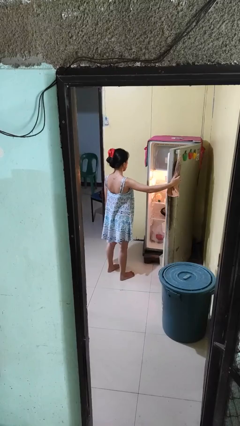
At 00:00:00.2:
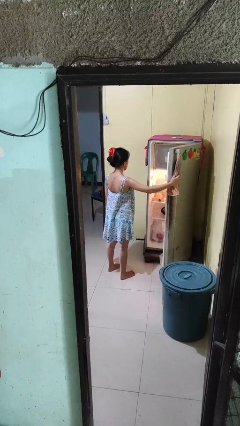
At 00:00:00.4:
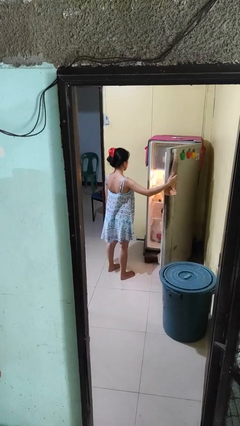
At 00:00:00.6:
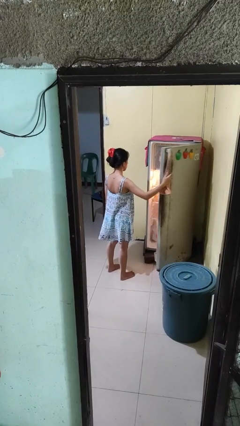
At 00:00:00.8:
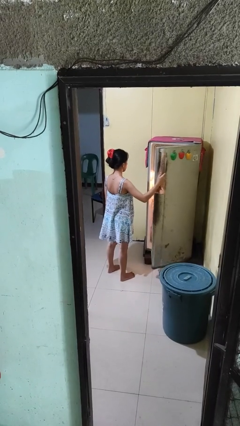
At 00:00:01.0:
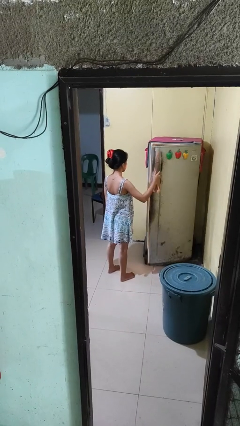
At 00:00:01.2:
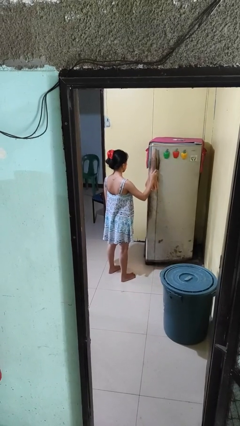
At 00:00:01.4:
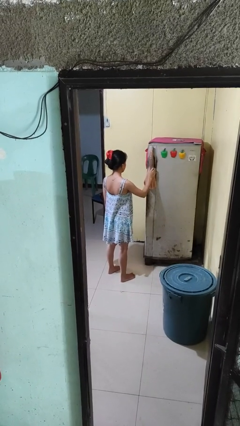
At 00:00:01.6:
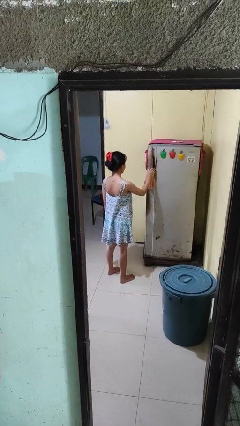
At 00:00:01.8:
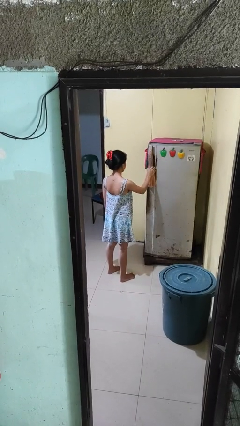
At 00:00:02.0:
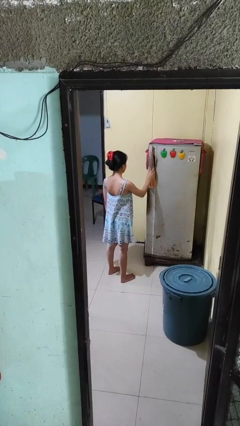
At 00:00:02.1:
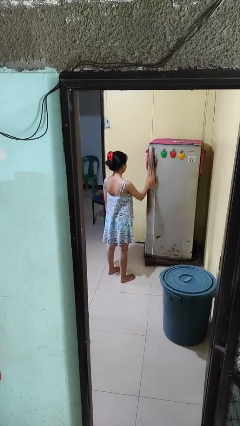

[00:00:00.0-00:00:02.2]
person closes refrigerator

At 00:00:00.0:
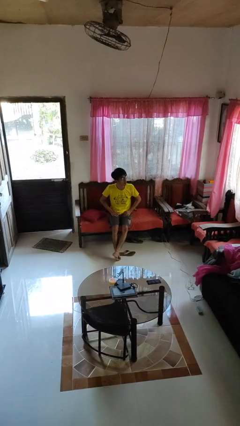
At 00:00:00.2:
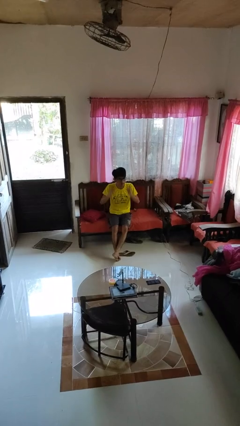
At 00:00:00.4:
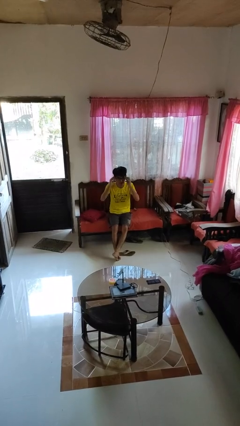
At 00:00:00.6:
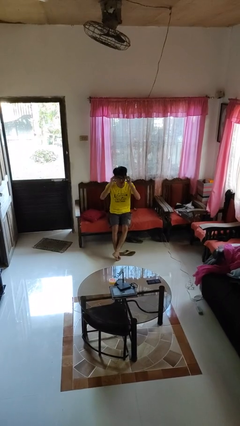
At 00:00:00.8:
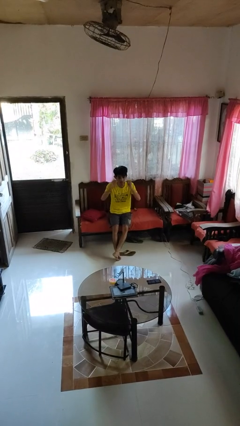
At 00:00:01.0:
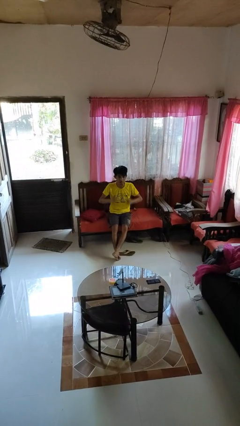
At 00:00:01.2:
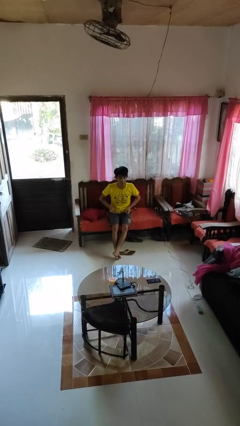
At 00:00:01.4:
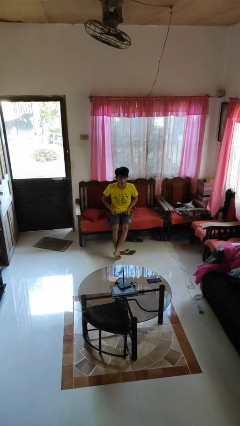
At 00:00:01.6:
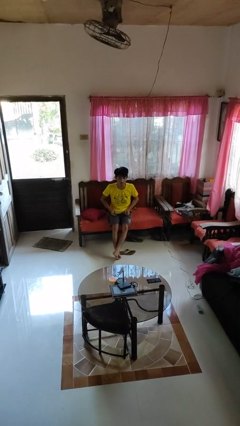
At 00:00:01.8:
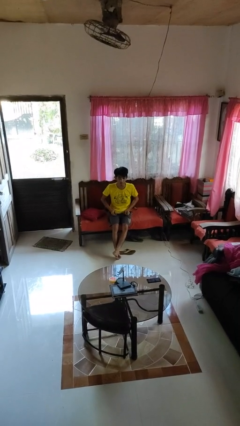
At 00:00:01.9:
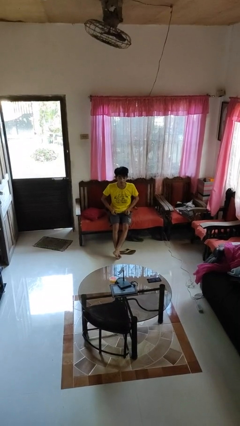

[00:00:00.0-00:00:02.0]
person takes off glasses

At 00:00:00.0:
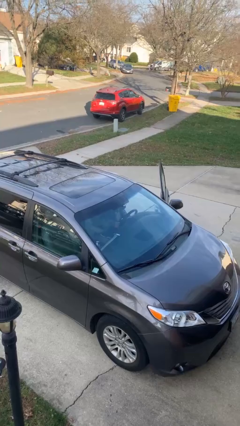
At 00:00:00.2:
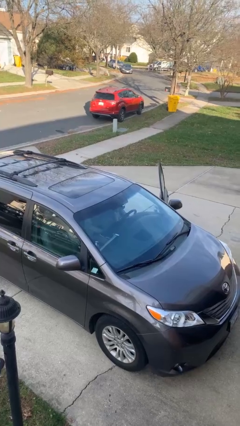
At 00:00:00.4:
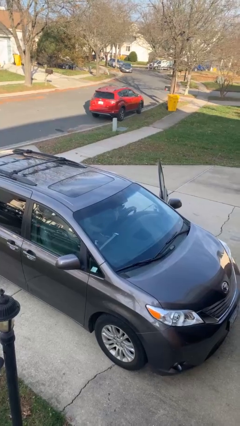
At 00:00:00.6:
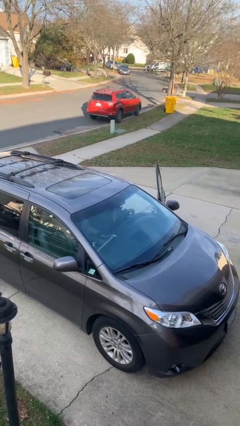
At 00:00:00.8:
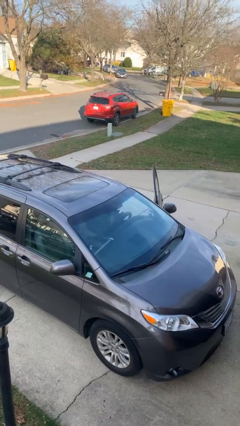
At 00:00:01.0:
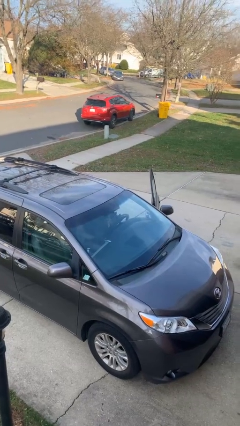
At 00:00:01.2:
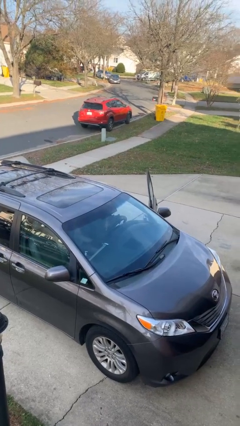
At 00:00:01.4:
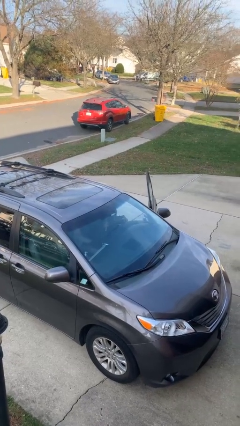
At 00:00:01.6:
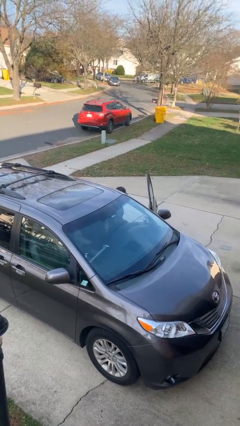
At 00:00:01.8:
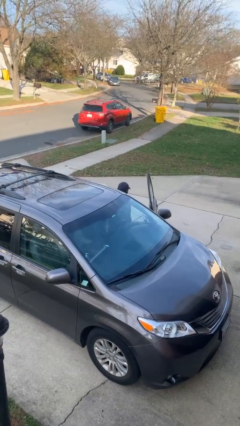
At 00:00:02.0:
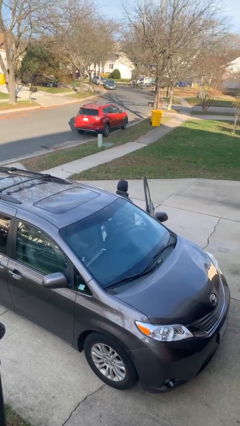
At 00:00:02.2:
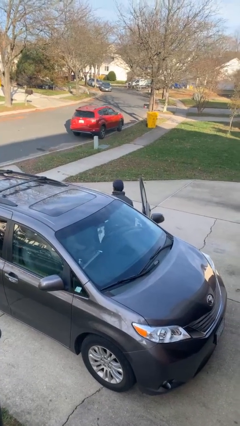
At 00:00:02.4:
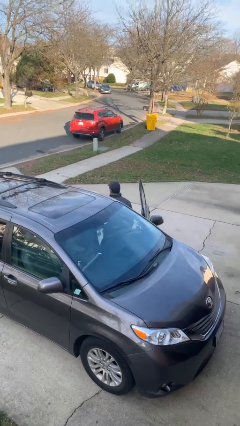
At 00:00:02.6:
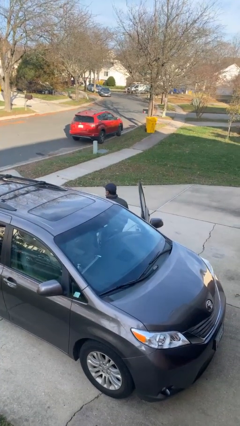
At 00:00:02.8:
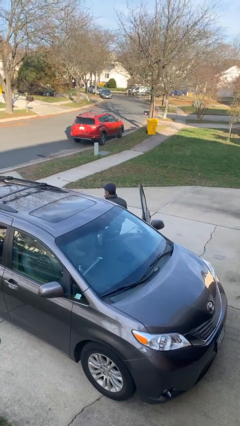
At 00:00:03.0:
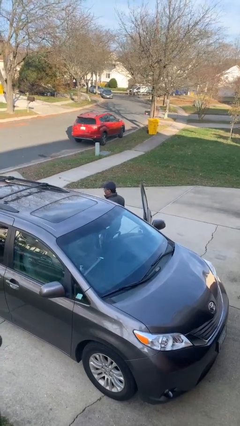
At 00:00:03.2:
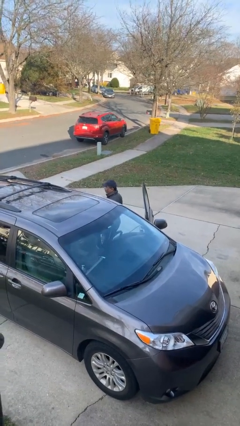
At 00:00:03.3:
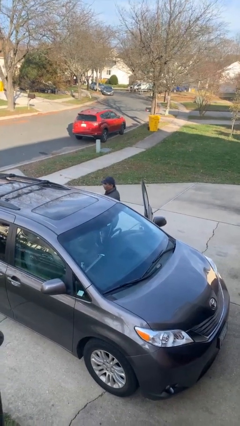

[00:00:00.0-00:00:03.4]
person exits car

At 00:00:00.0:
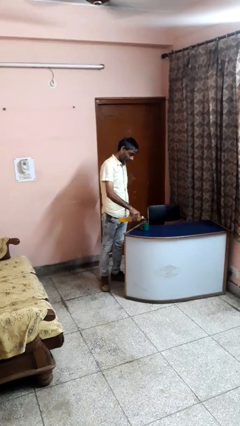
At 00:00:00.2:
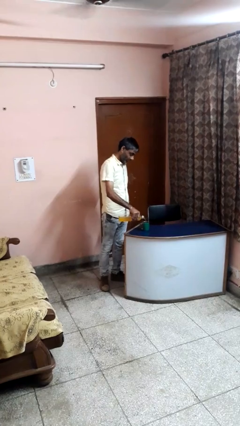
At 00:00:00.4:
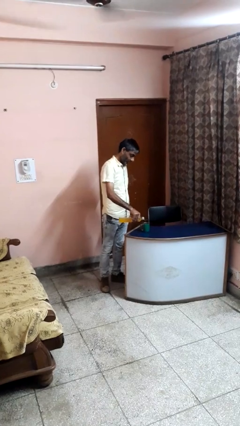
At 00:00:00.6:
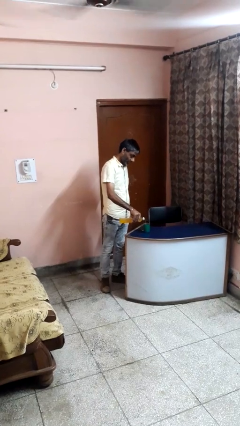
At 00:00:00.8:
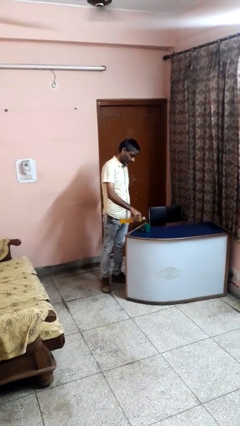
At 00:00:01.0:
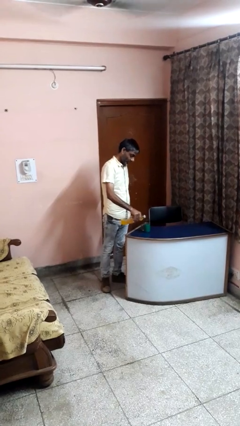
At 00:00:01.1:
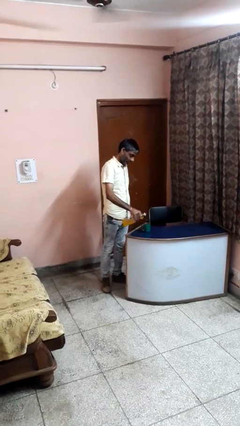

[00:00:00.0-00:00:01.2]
person pours liquid into cup

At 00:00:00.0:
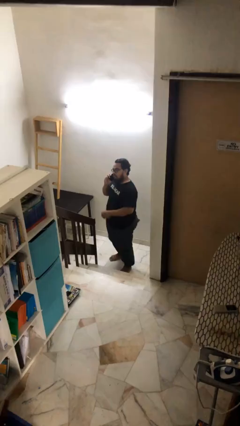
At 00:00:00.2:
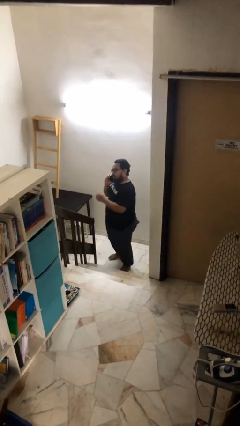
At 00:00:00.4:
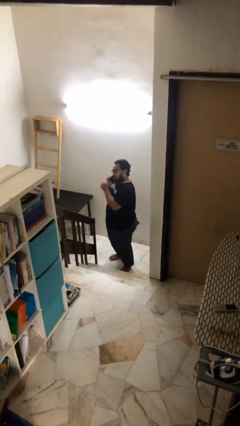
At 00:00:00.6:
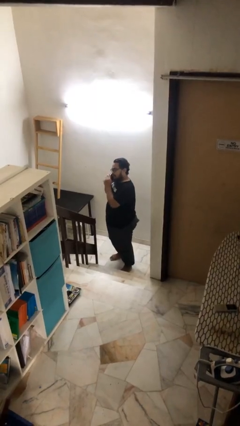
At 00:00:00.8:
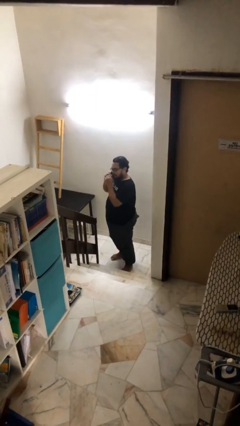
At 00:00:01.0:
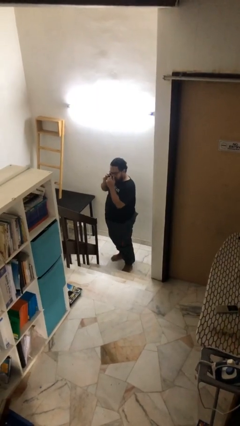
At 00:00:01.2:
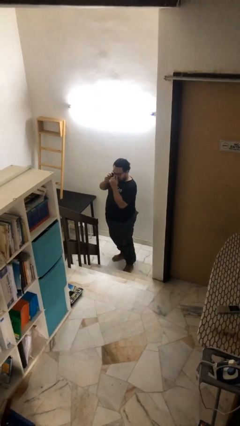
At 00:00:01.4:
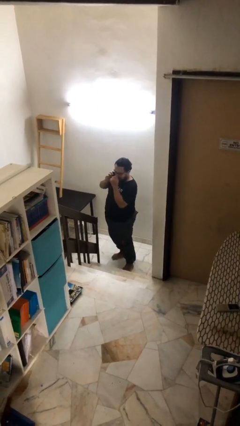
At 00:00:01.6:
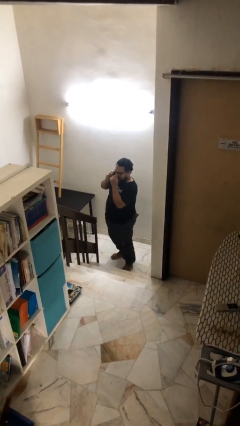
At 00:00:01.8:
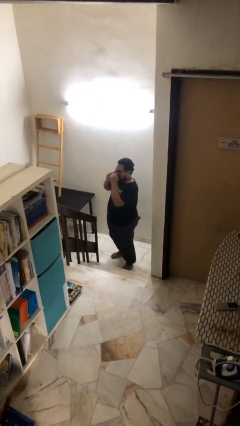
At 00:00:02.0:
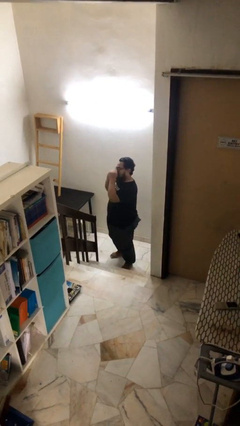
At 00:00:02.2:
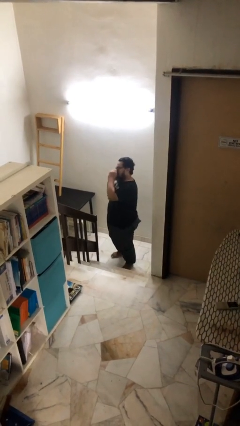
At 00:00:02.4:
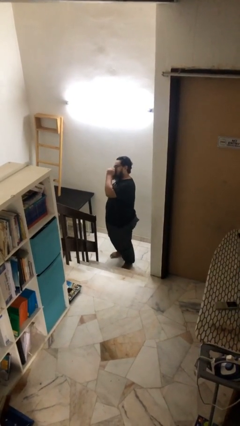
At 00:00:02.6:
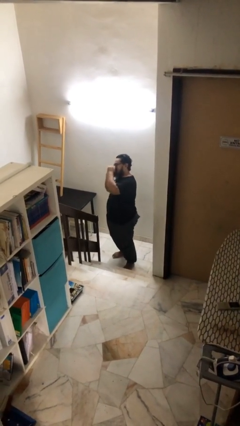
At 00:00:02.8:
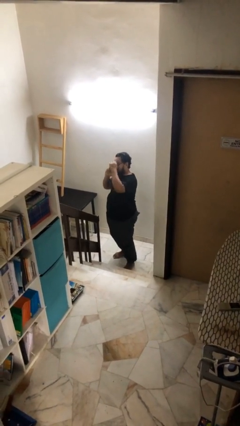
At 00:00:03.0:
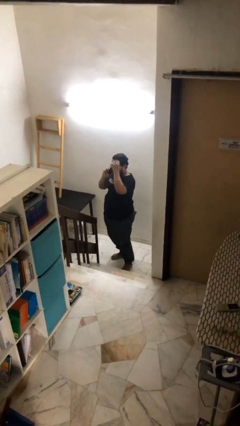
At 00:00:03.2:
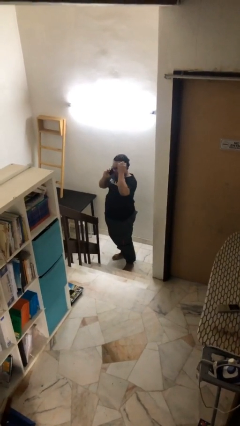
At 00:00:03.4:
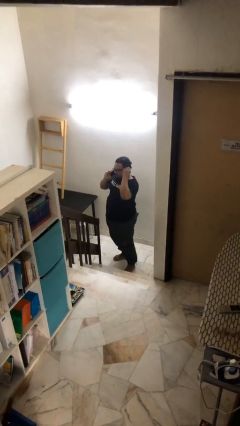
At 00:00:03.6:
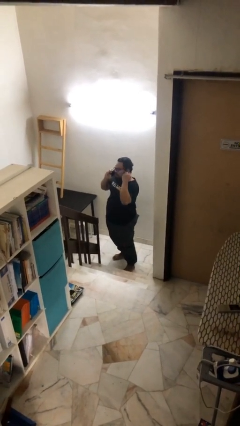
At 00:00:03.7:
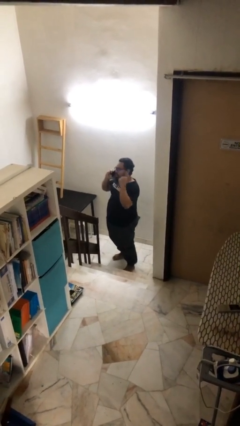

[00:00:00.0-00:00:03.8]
person talks on phone

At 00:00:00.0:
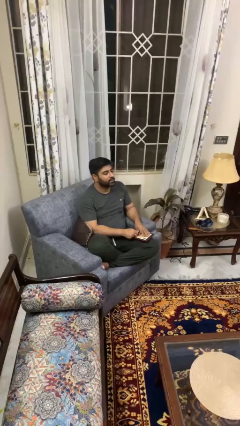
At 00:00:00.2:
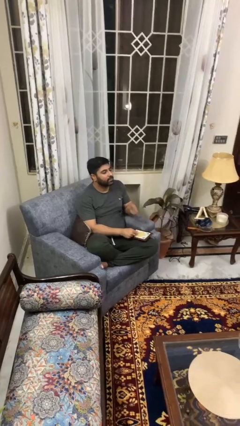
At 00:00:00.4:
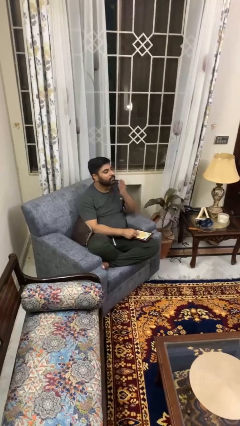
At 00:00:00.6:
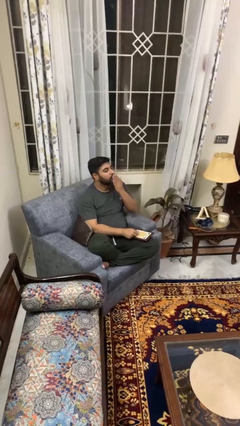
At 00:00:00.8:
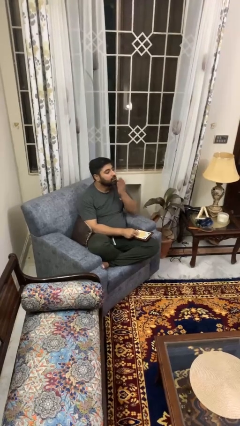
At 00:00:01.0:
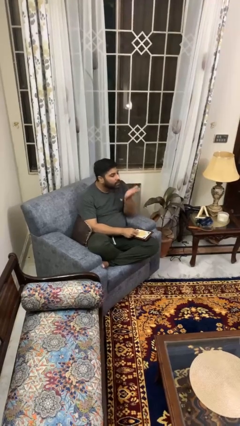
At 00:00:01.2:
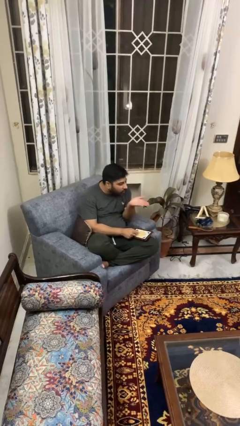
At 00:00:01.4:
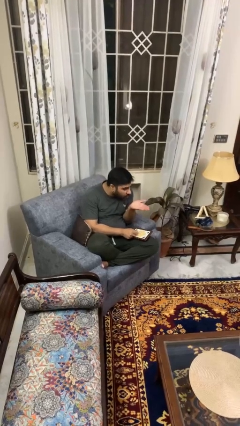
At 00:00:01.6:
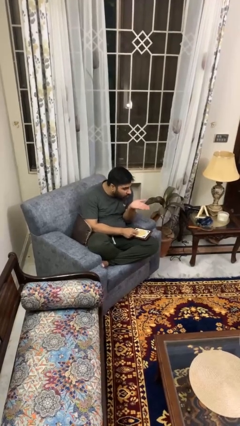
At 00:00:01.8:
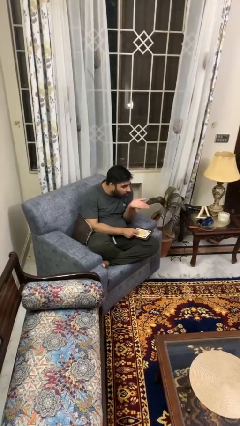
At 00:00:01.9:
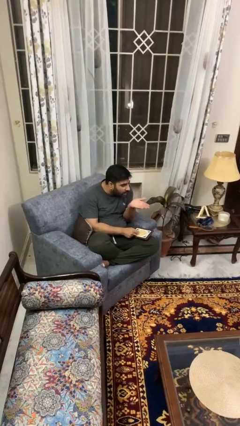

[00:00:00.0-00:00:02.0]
person gestures blow kiss

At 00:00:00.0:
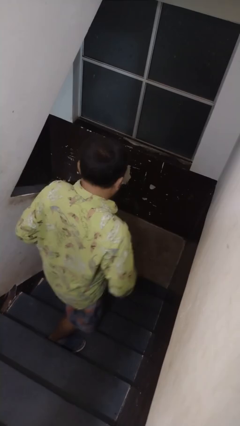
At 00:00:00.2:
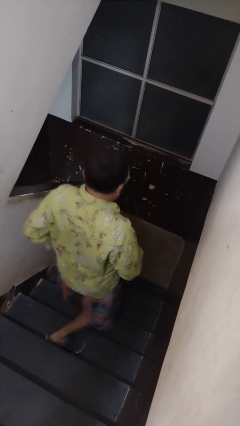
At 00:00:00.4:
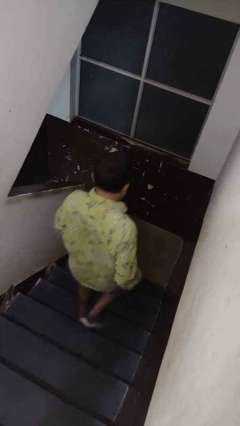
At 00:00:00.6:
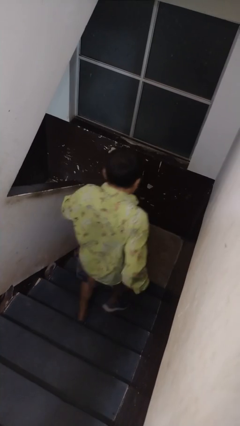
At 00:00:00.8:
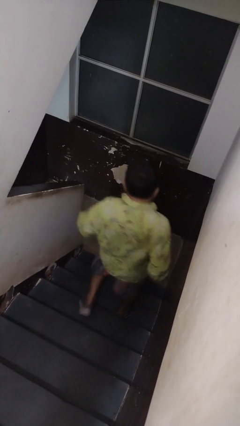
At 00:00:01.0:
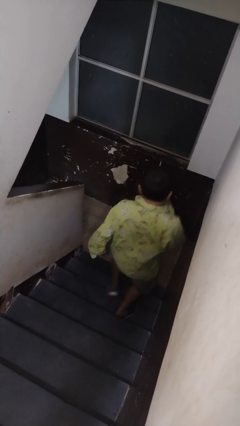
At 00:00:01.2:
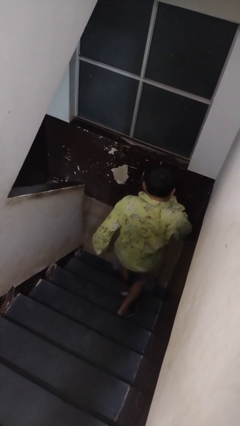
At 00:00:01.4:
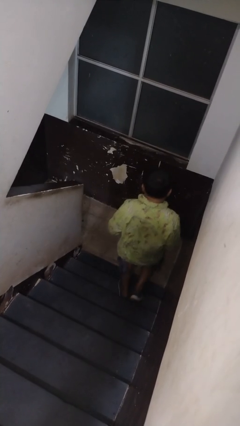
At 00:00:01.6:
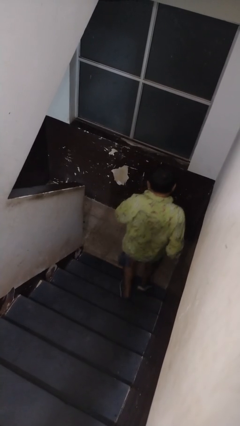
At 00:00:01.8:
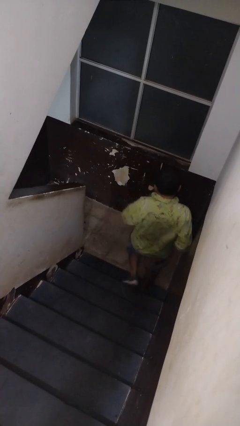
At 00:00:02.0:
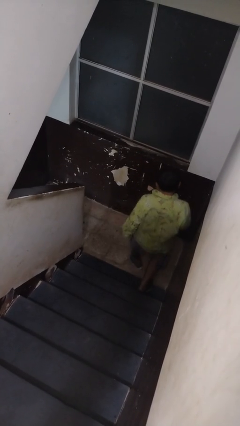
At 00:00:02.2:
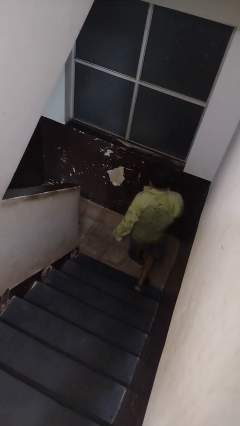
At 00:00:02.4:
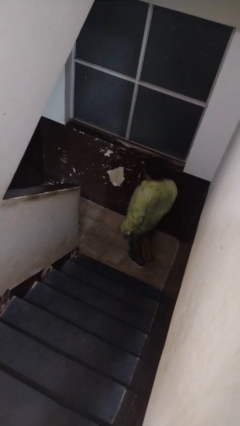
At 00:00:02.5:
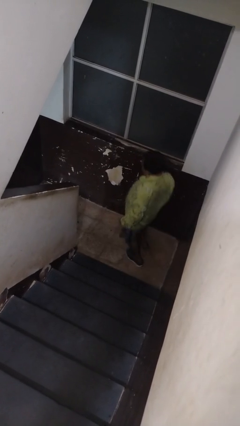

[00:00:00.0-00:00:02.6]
person climbs down stairs
